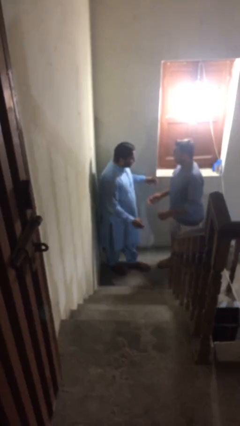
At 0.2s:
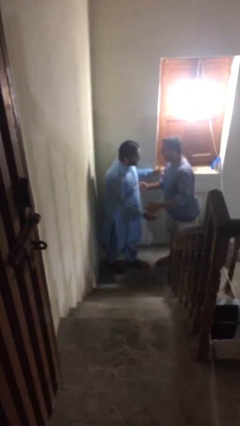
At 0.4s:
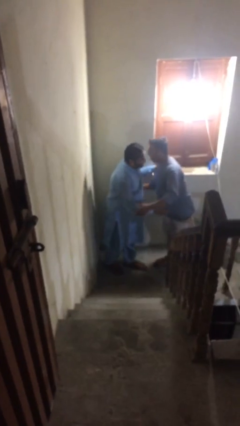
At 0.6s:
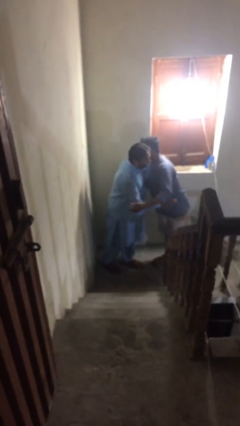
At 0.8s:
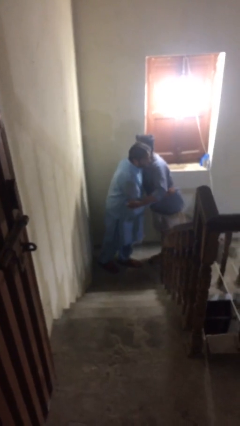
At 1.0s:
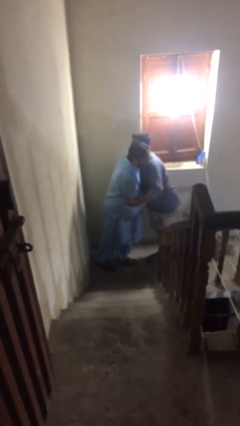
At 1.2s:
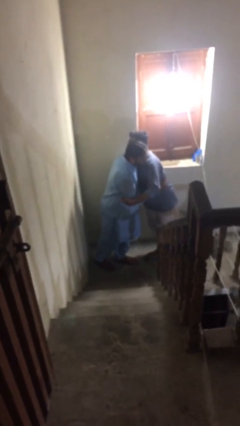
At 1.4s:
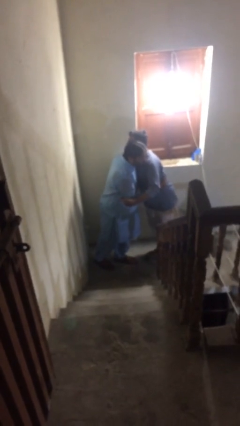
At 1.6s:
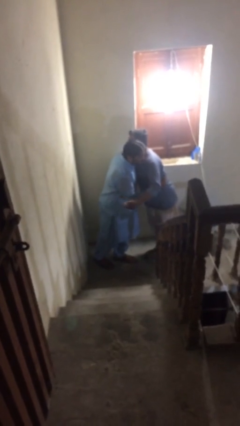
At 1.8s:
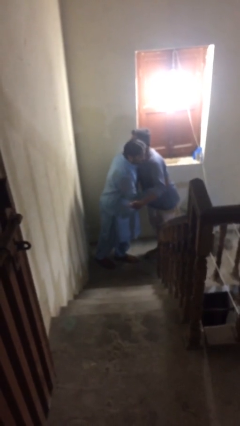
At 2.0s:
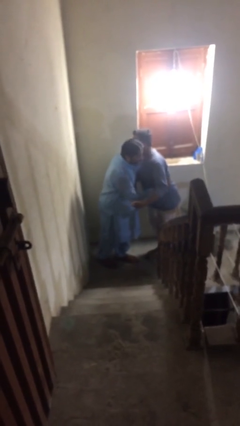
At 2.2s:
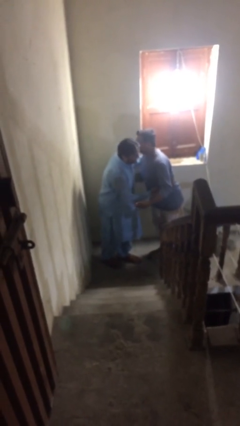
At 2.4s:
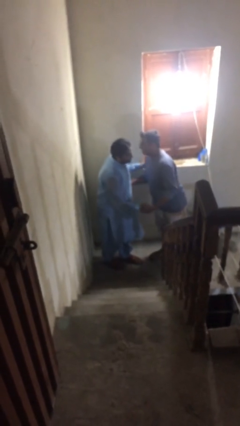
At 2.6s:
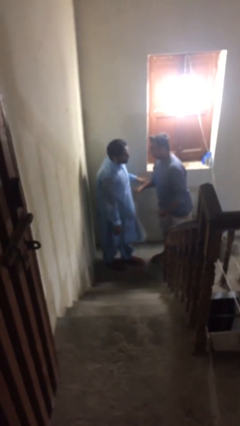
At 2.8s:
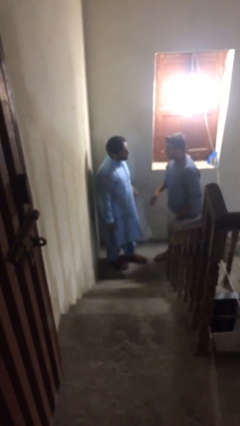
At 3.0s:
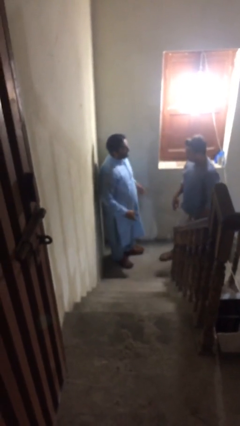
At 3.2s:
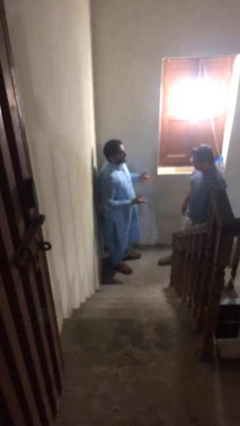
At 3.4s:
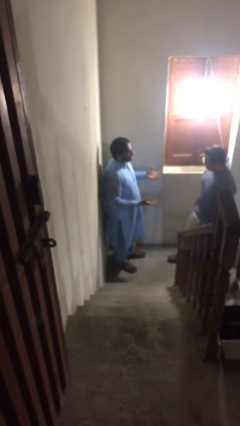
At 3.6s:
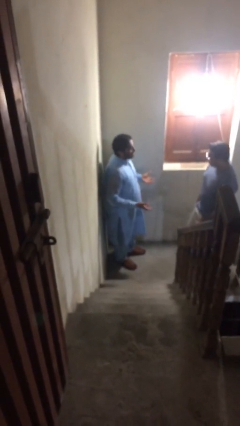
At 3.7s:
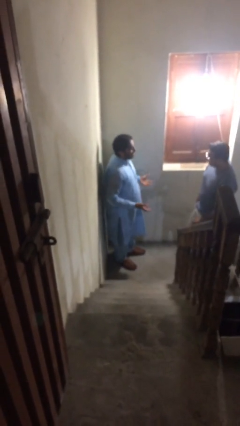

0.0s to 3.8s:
person embraces person

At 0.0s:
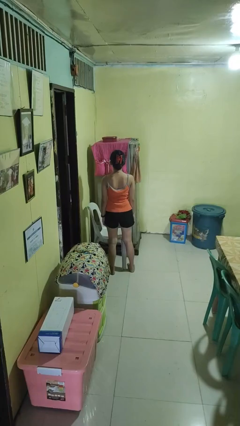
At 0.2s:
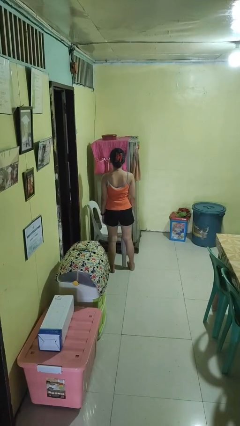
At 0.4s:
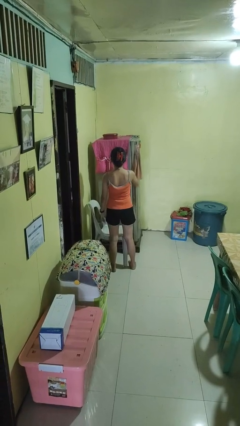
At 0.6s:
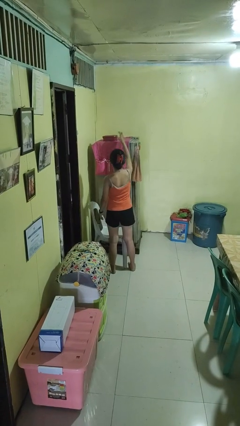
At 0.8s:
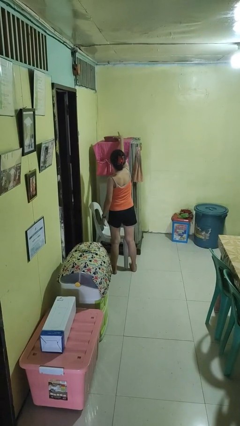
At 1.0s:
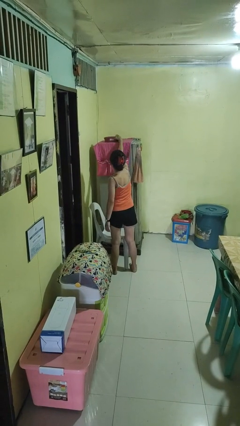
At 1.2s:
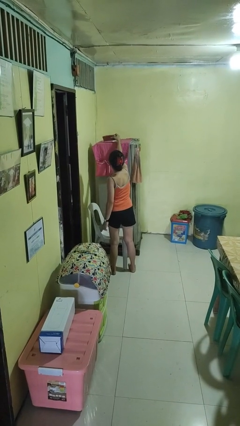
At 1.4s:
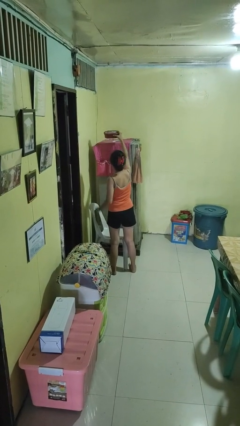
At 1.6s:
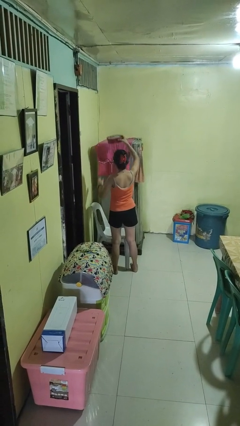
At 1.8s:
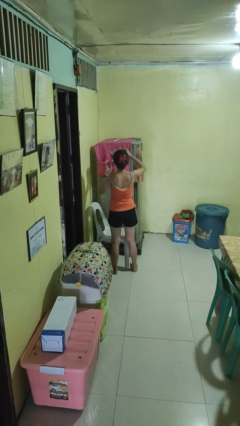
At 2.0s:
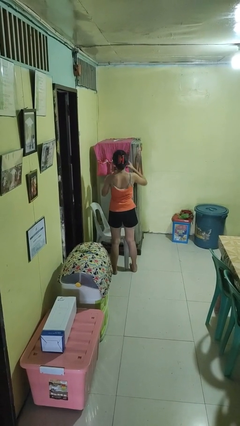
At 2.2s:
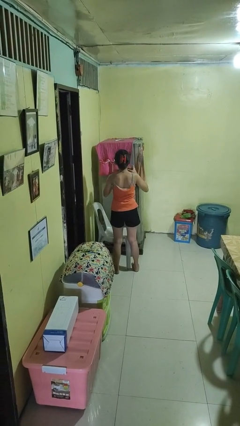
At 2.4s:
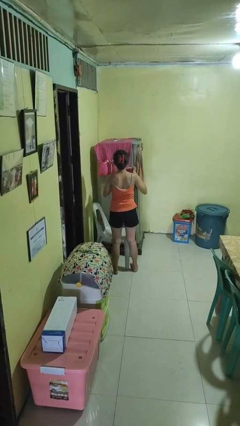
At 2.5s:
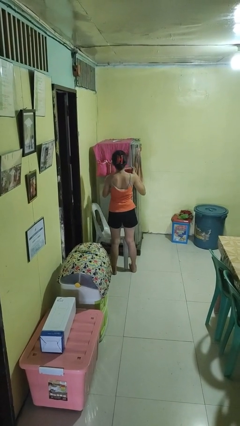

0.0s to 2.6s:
person picks up object from shelf

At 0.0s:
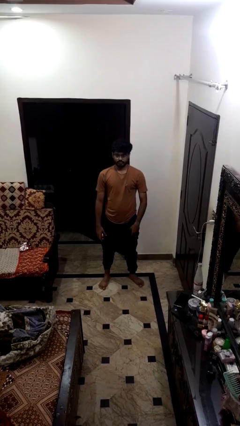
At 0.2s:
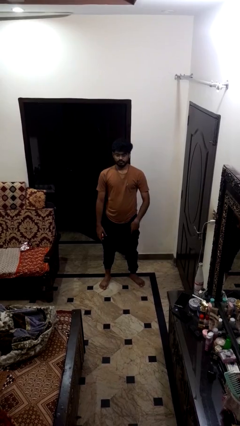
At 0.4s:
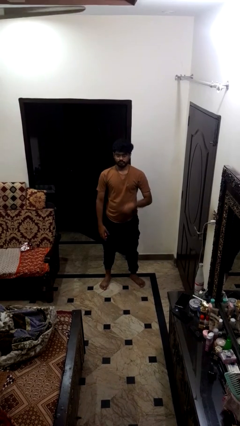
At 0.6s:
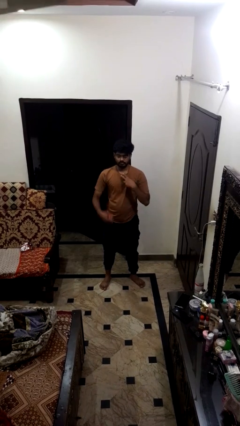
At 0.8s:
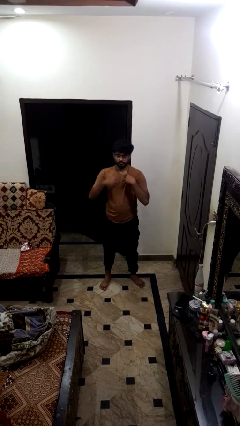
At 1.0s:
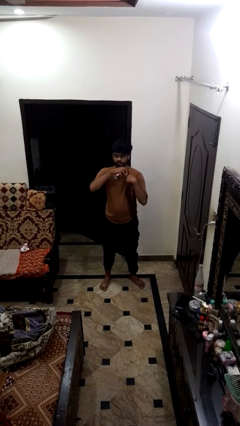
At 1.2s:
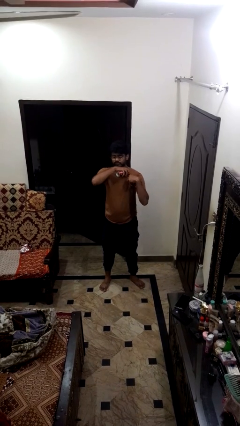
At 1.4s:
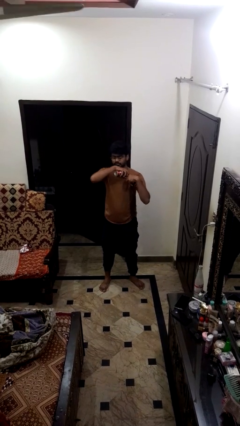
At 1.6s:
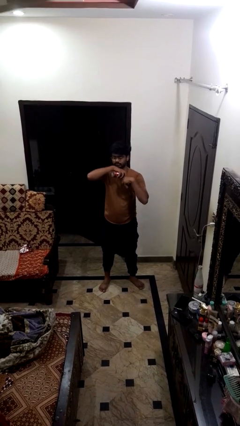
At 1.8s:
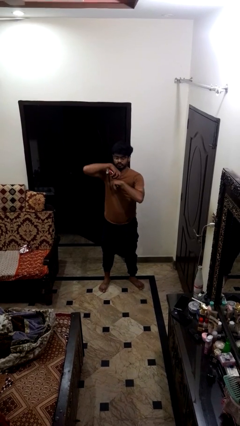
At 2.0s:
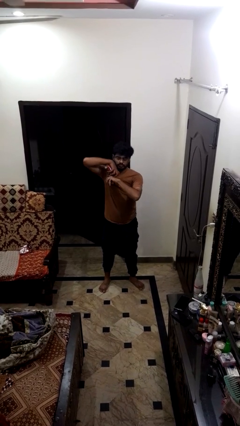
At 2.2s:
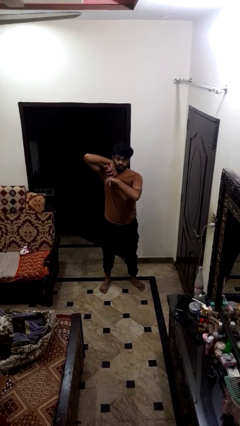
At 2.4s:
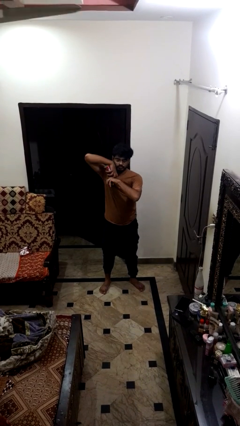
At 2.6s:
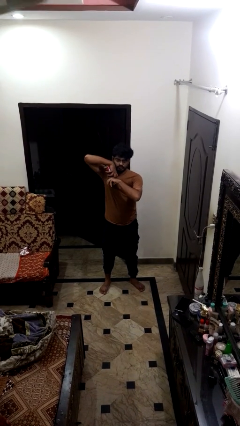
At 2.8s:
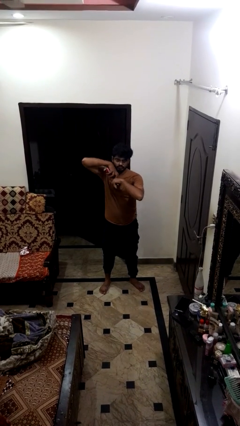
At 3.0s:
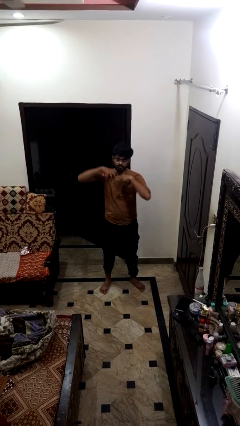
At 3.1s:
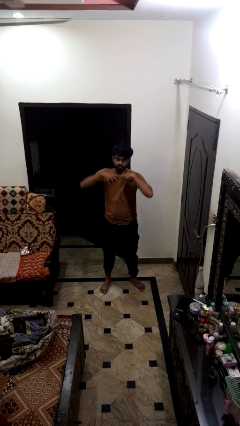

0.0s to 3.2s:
person applies deodorant

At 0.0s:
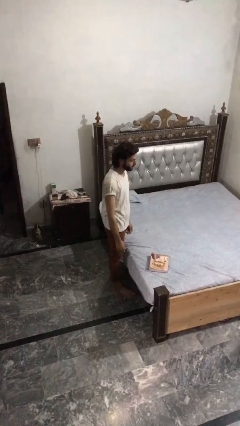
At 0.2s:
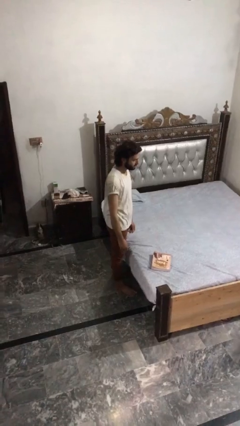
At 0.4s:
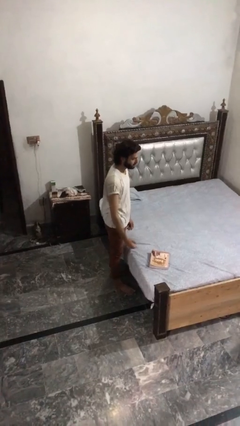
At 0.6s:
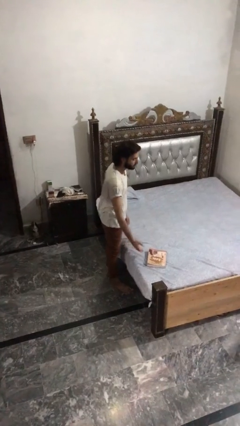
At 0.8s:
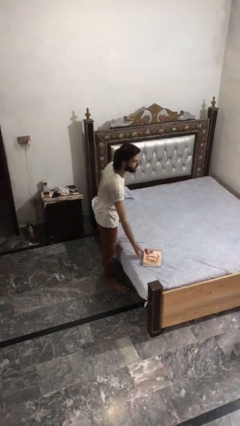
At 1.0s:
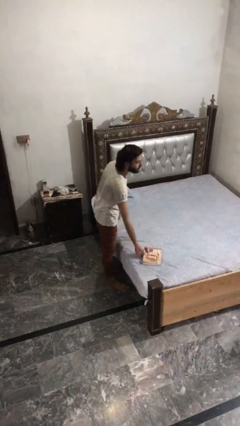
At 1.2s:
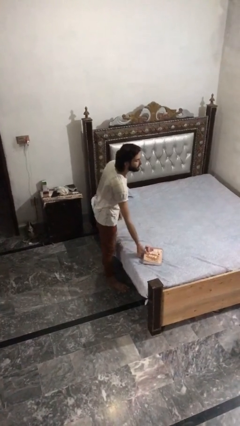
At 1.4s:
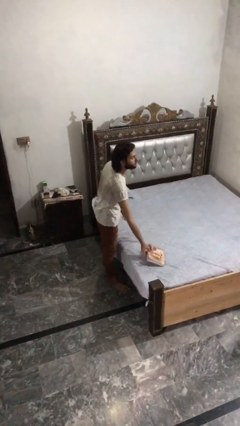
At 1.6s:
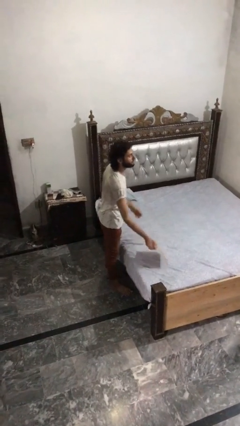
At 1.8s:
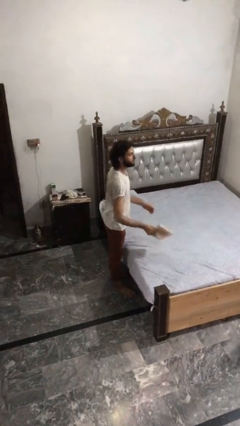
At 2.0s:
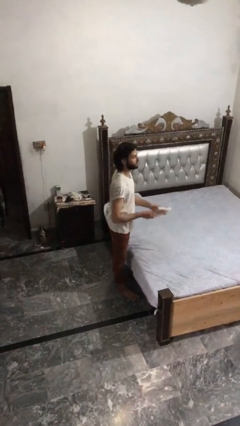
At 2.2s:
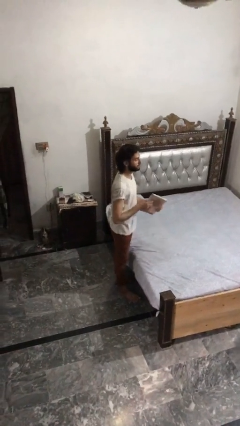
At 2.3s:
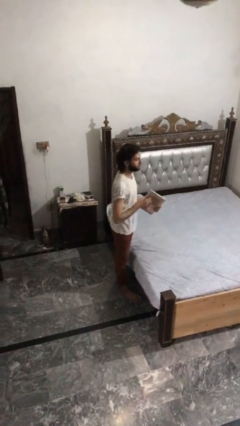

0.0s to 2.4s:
person picks up object from bed

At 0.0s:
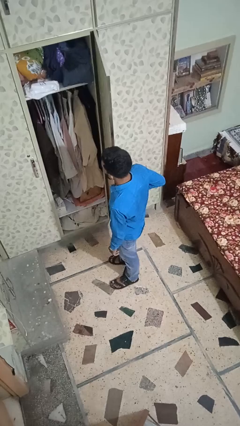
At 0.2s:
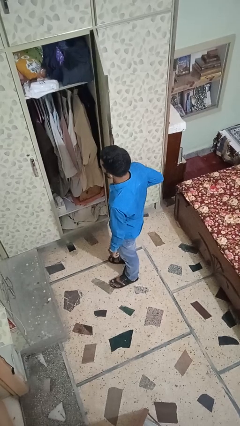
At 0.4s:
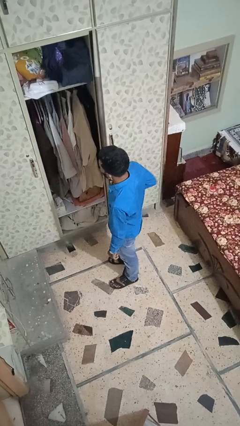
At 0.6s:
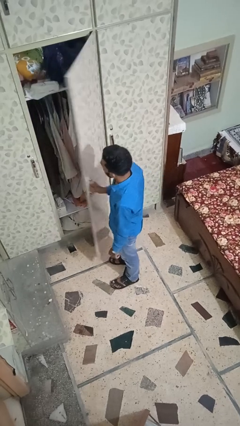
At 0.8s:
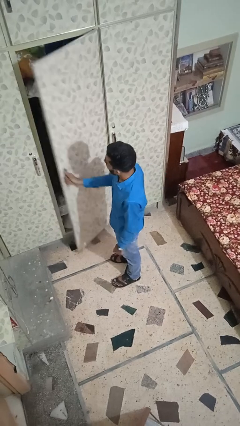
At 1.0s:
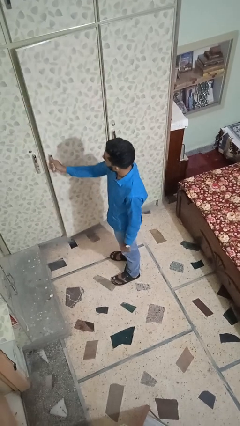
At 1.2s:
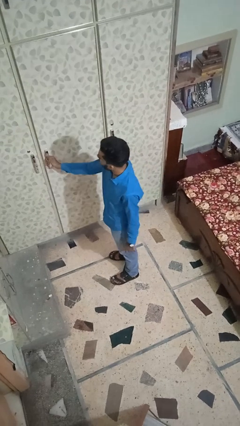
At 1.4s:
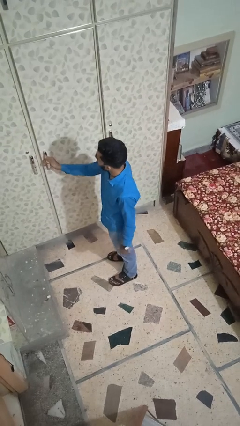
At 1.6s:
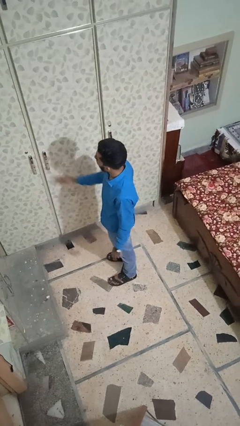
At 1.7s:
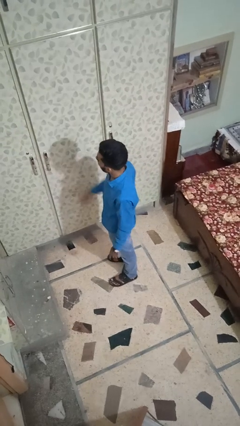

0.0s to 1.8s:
person closes closet door

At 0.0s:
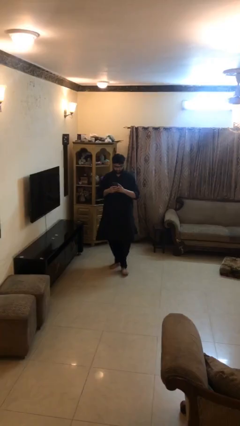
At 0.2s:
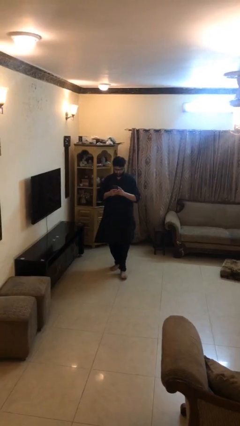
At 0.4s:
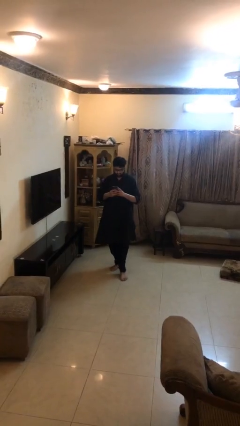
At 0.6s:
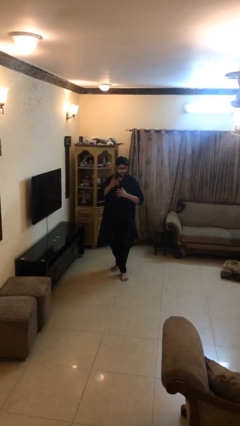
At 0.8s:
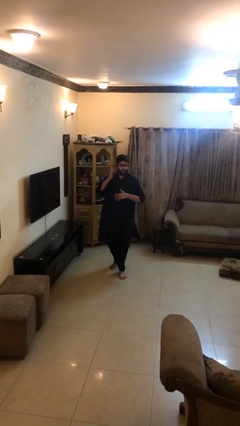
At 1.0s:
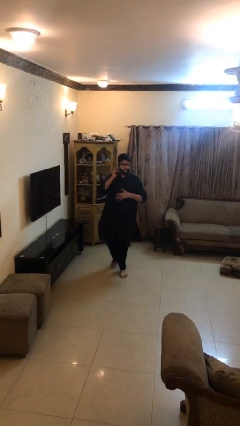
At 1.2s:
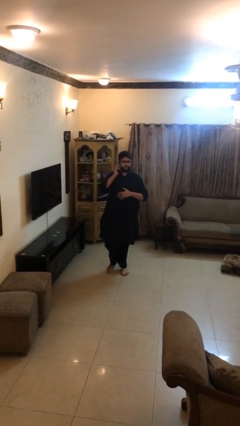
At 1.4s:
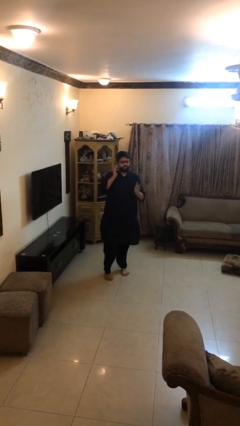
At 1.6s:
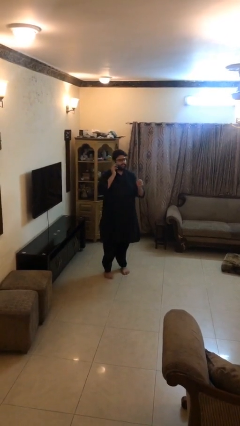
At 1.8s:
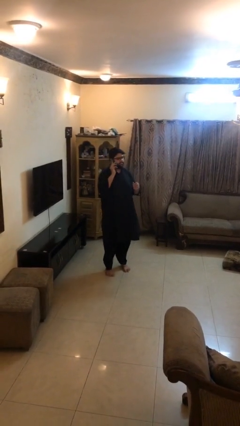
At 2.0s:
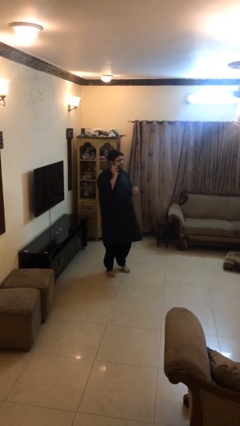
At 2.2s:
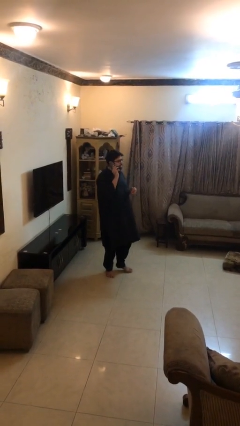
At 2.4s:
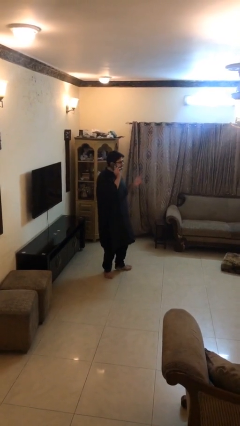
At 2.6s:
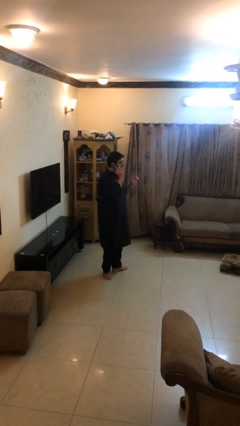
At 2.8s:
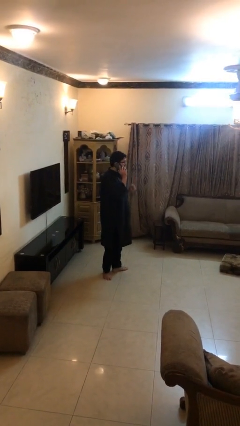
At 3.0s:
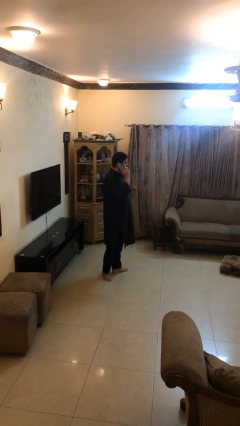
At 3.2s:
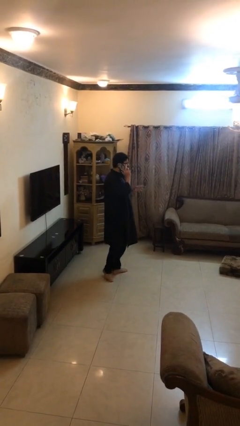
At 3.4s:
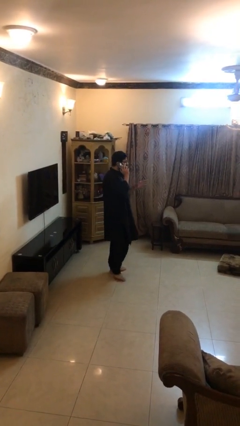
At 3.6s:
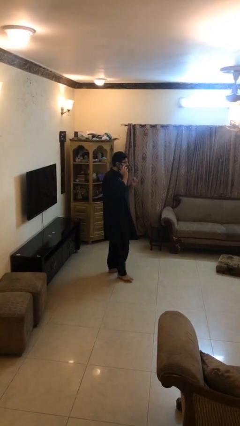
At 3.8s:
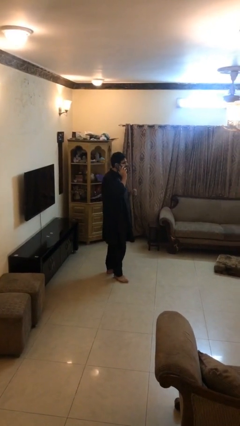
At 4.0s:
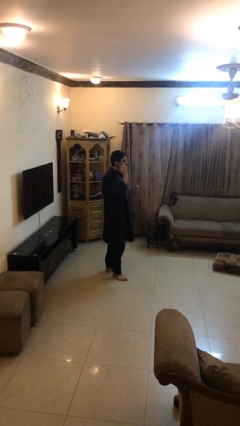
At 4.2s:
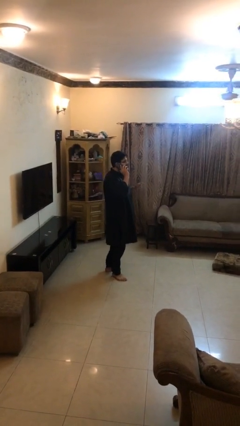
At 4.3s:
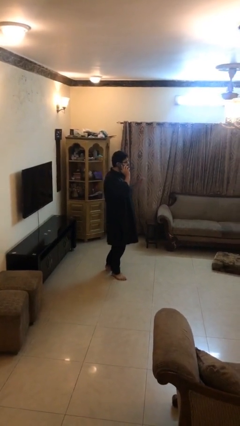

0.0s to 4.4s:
person talks on phone
